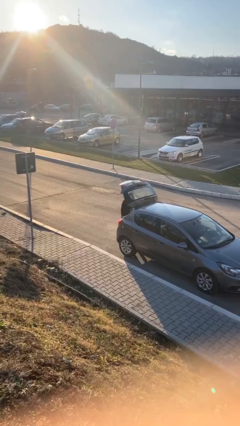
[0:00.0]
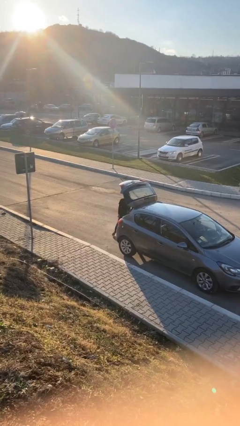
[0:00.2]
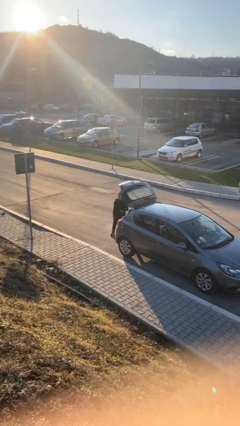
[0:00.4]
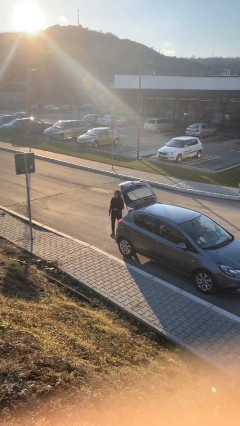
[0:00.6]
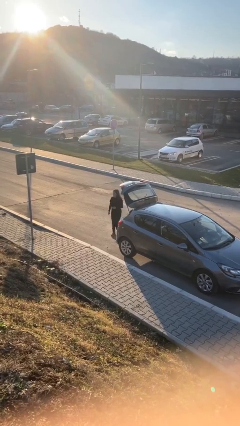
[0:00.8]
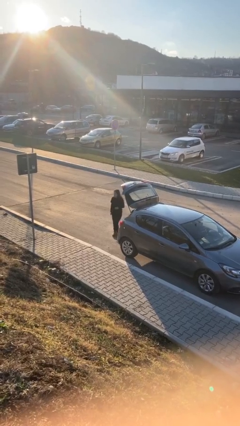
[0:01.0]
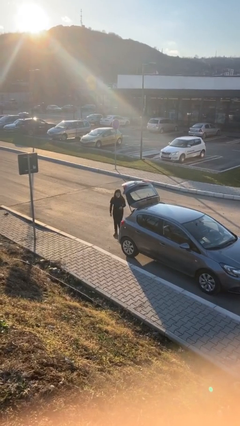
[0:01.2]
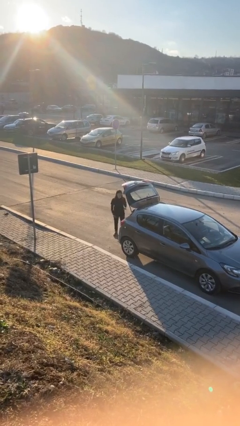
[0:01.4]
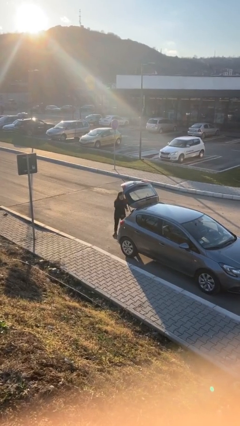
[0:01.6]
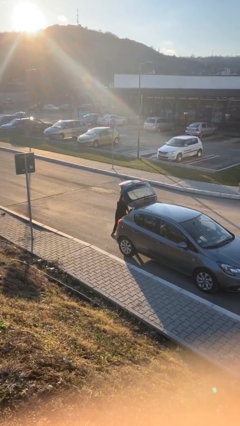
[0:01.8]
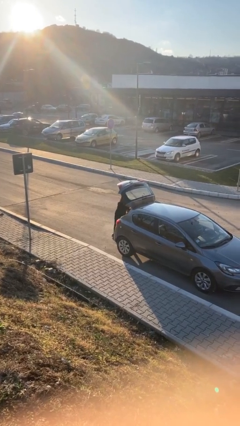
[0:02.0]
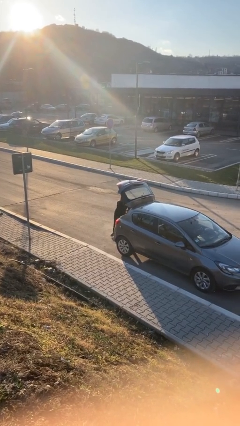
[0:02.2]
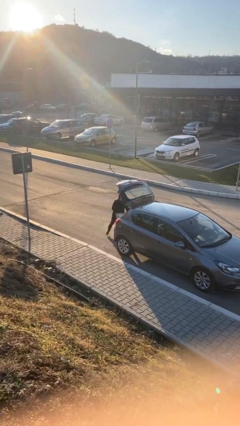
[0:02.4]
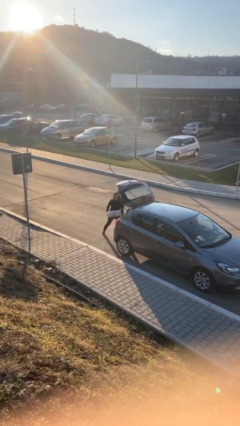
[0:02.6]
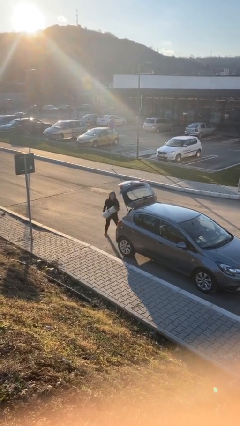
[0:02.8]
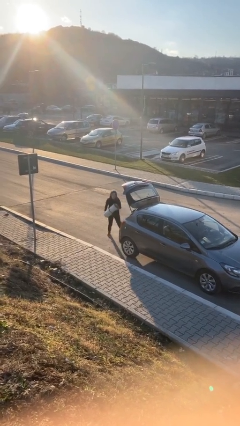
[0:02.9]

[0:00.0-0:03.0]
person unloads car

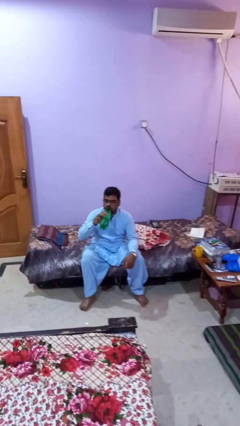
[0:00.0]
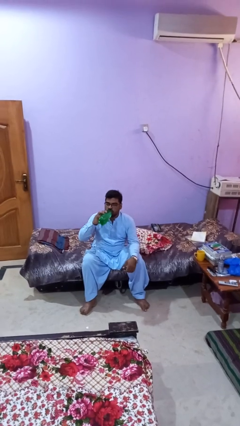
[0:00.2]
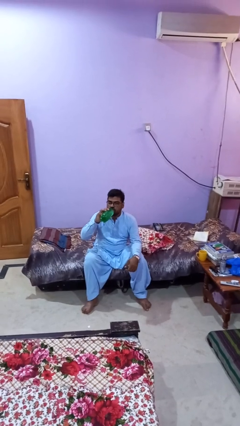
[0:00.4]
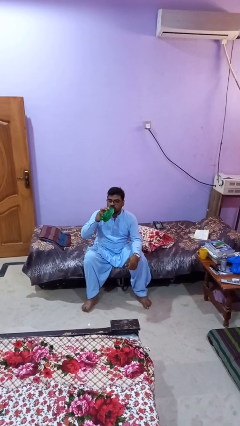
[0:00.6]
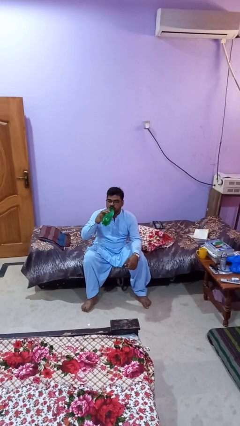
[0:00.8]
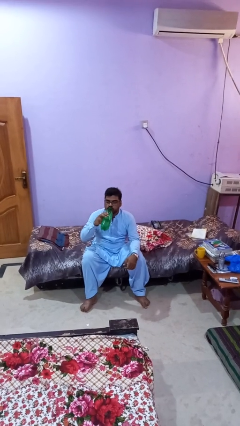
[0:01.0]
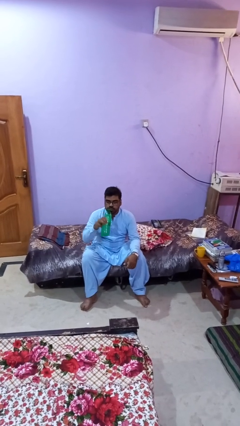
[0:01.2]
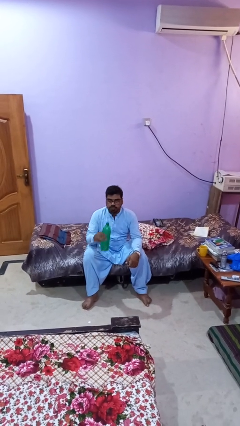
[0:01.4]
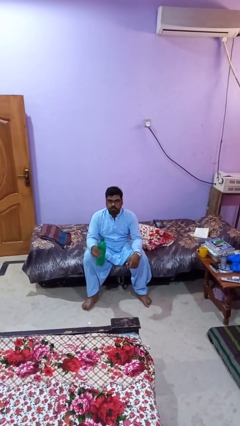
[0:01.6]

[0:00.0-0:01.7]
person drinks from bottle

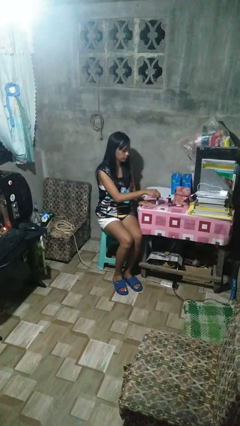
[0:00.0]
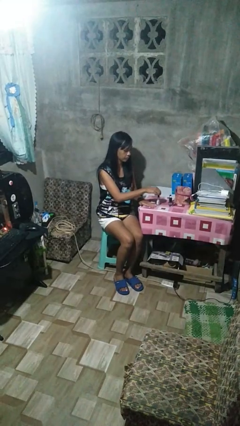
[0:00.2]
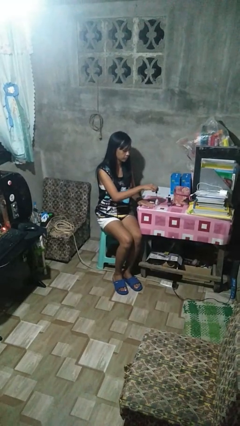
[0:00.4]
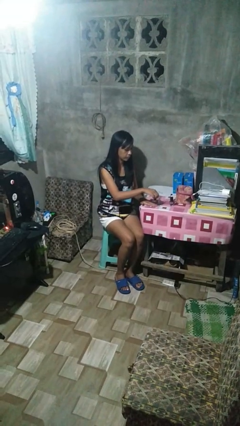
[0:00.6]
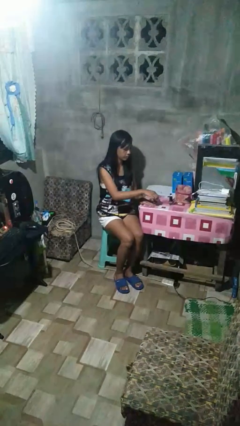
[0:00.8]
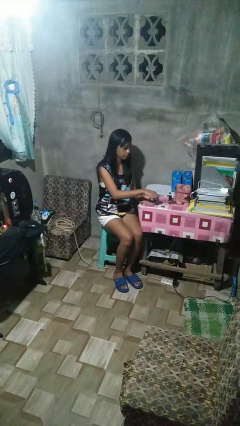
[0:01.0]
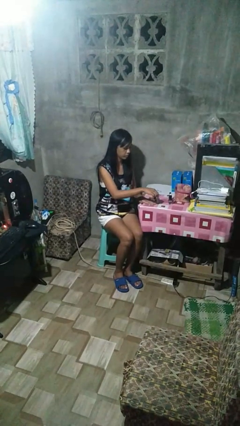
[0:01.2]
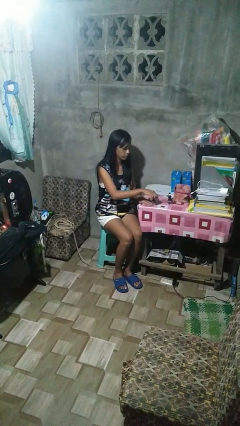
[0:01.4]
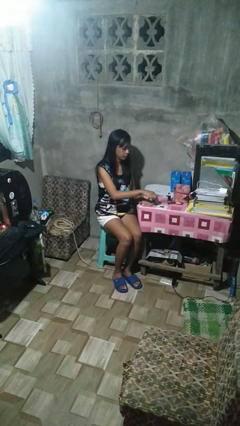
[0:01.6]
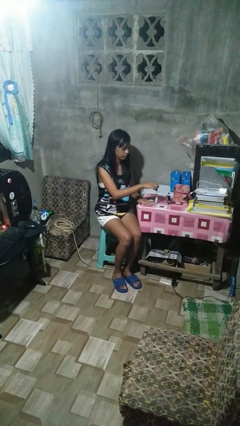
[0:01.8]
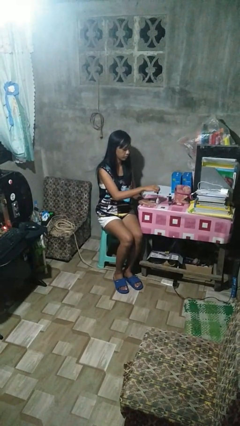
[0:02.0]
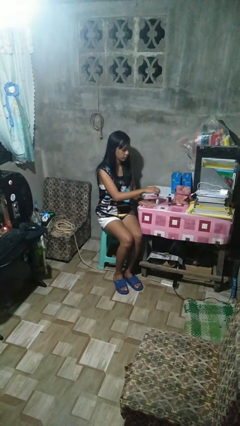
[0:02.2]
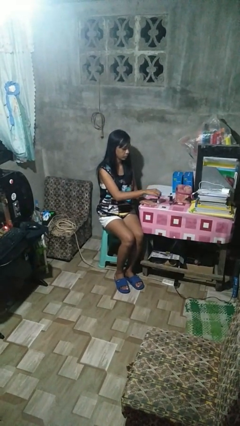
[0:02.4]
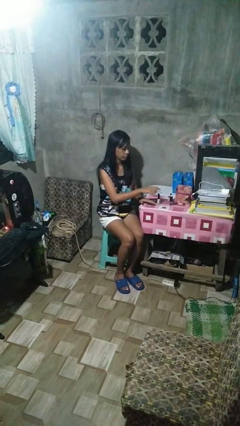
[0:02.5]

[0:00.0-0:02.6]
person paints fingernails

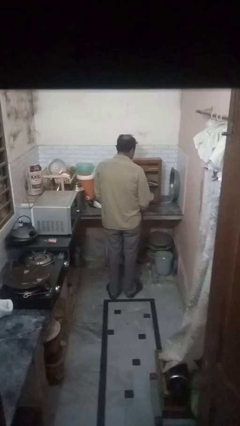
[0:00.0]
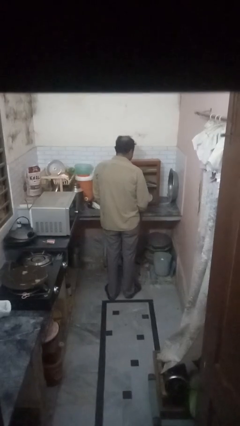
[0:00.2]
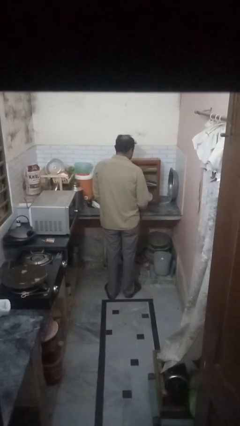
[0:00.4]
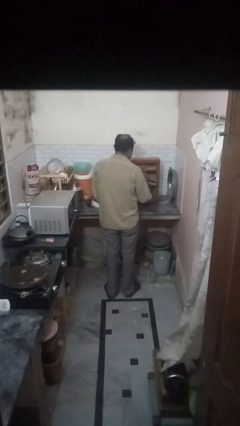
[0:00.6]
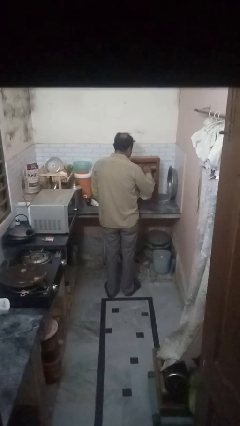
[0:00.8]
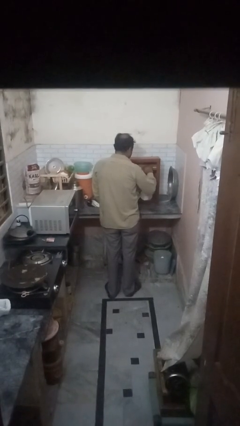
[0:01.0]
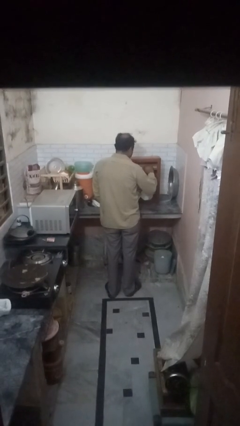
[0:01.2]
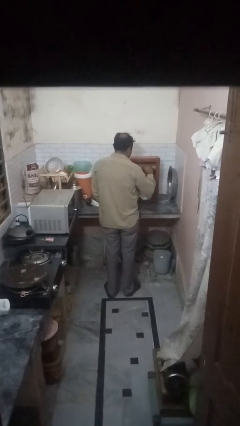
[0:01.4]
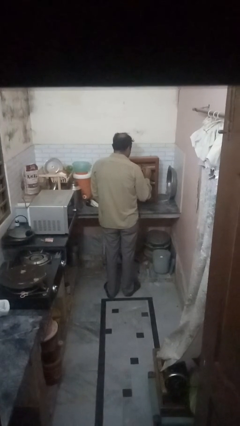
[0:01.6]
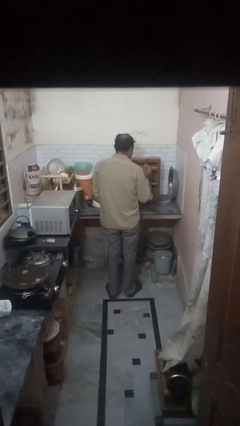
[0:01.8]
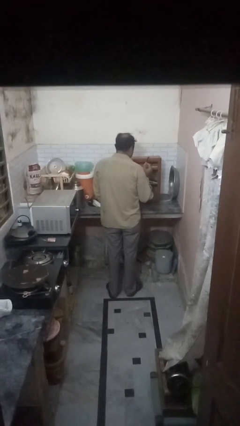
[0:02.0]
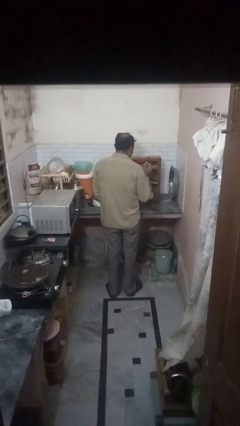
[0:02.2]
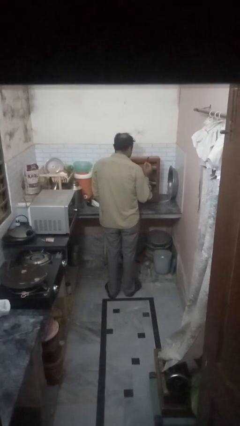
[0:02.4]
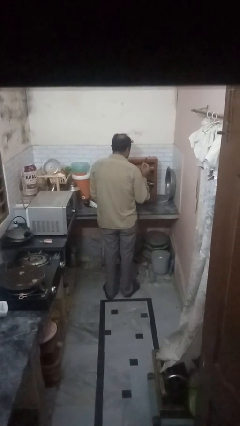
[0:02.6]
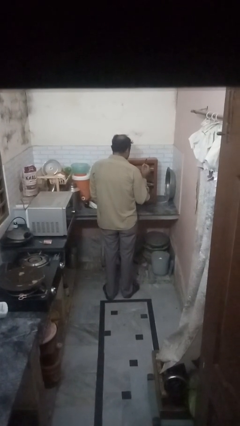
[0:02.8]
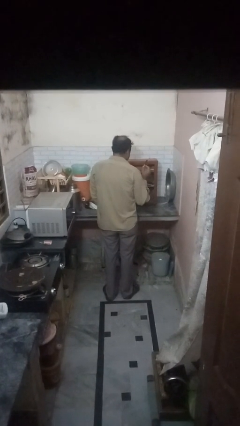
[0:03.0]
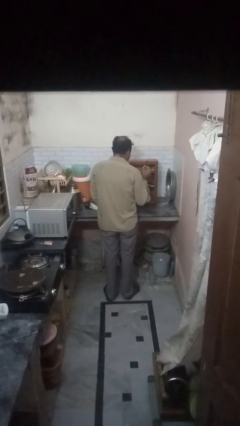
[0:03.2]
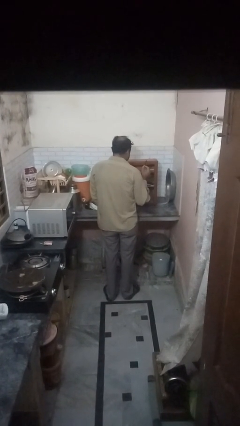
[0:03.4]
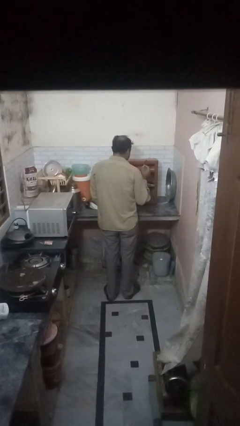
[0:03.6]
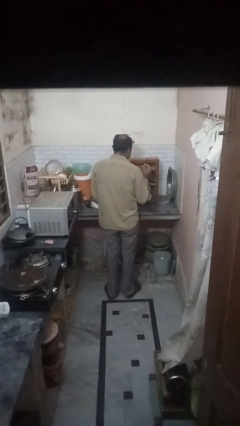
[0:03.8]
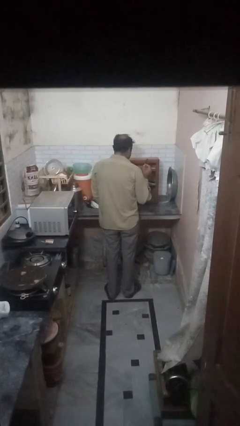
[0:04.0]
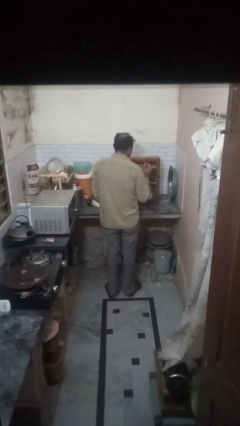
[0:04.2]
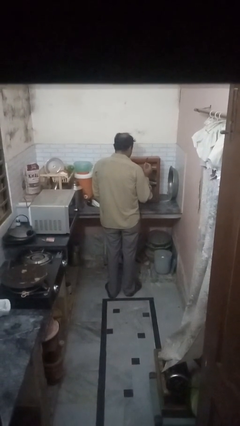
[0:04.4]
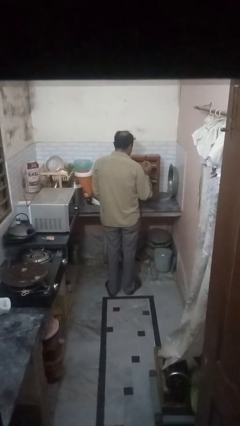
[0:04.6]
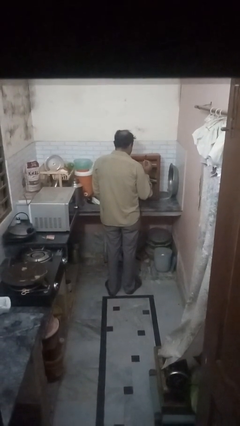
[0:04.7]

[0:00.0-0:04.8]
person puts object in cabinet

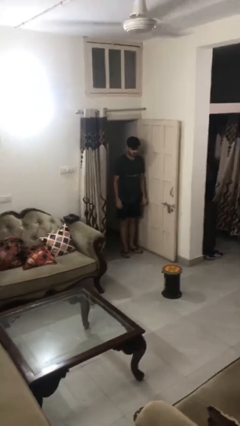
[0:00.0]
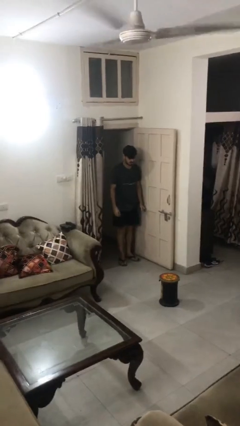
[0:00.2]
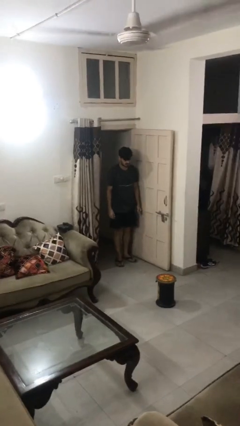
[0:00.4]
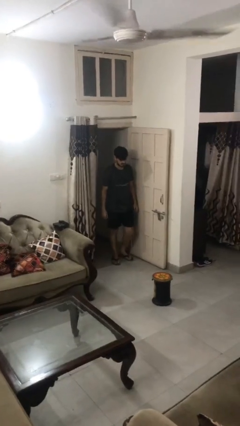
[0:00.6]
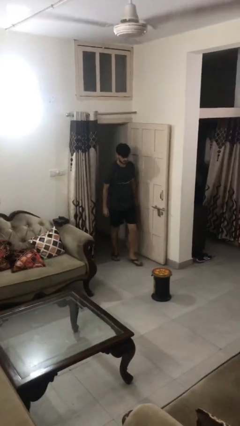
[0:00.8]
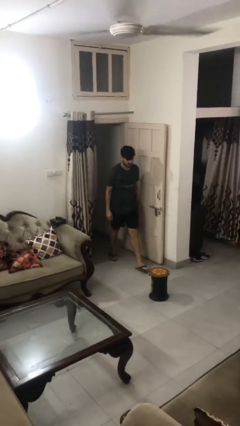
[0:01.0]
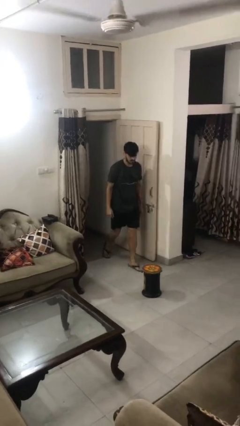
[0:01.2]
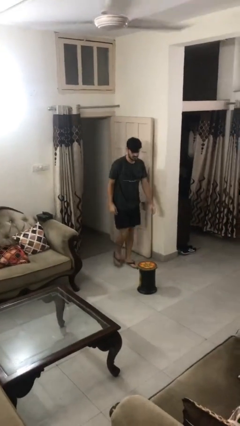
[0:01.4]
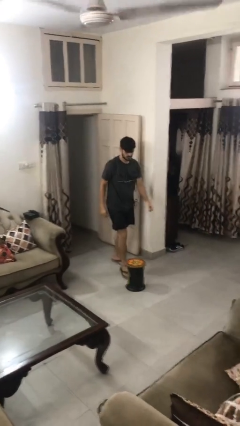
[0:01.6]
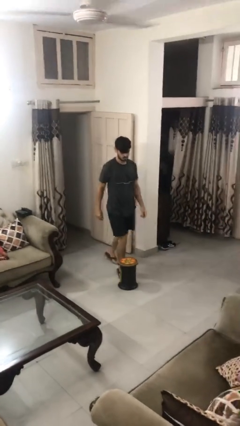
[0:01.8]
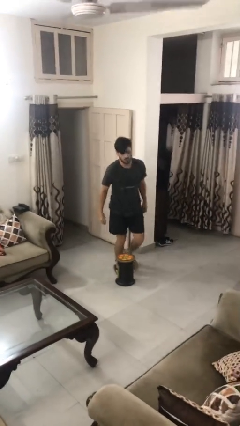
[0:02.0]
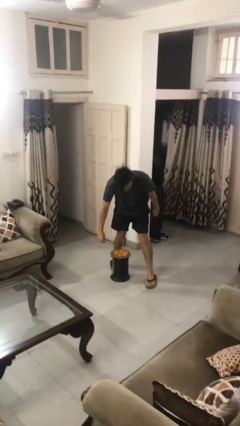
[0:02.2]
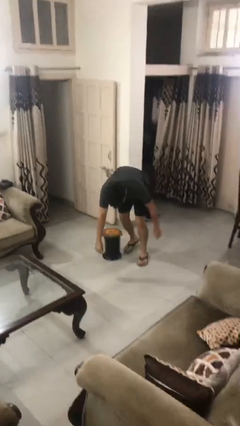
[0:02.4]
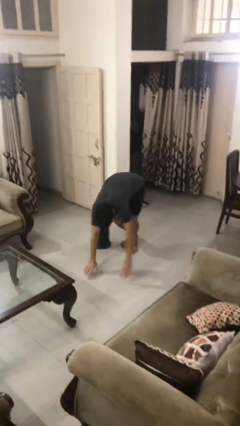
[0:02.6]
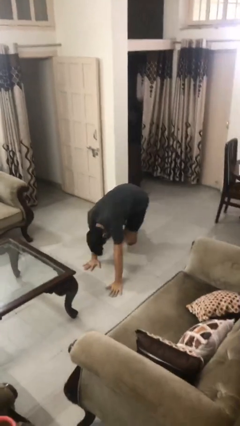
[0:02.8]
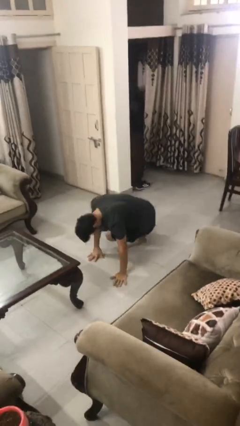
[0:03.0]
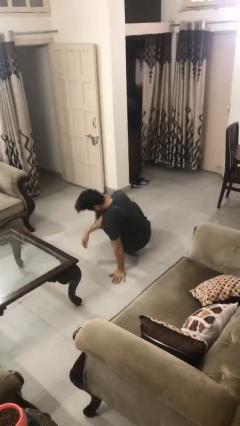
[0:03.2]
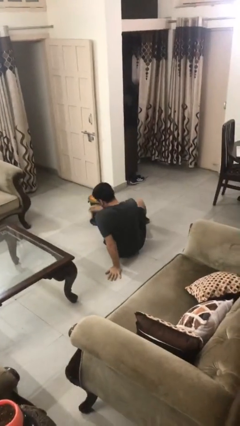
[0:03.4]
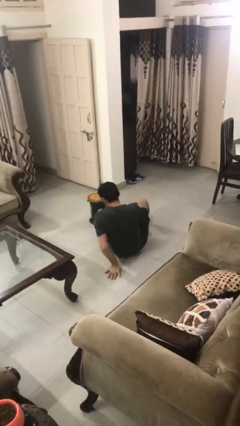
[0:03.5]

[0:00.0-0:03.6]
person trips on object on floor

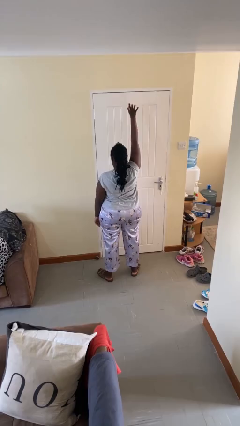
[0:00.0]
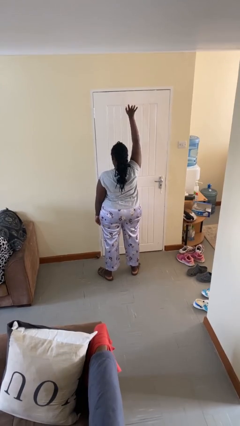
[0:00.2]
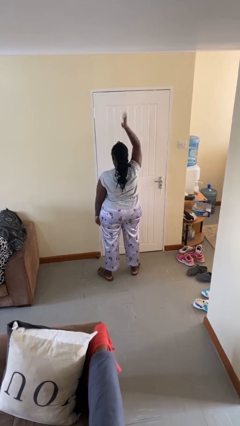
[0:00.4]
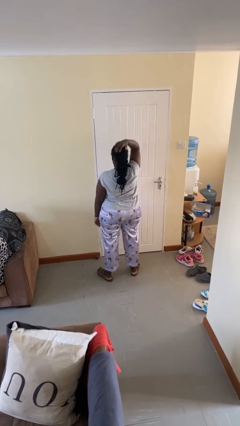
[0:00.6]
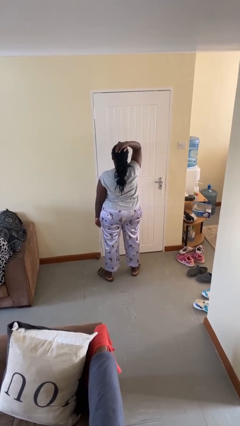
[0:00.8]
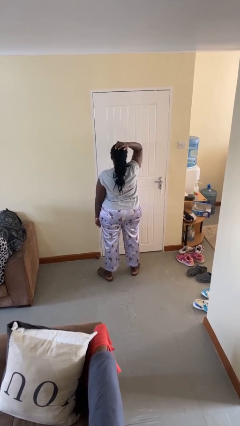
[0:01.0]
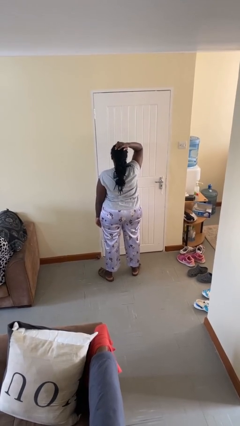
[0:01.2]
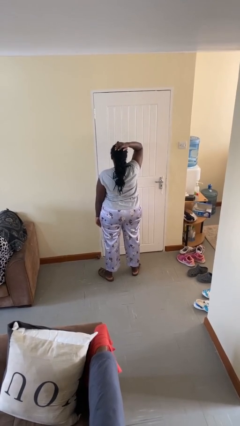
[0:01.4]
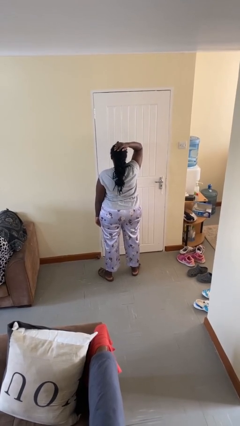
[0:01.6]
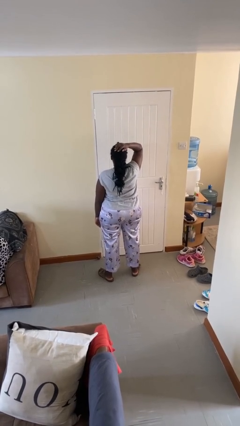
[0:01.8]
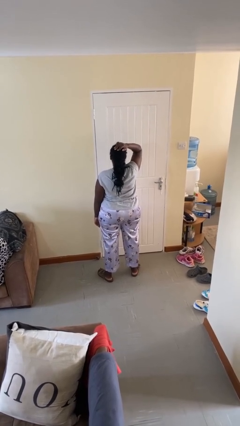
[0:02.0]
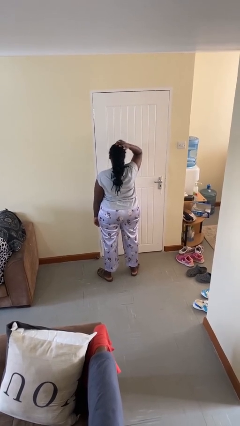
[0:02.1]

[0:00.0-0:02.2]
person gestures lower hand
